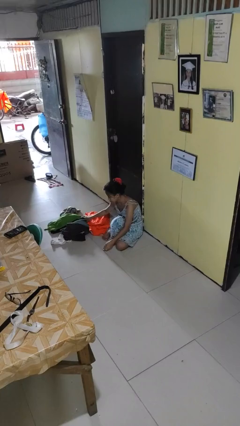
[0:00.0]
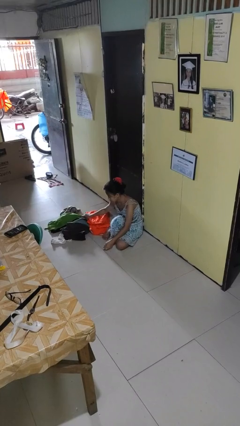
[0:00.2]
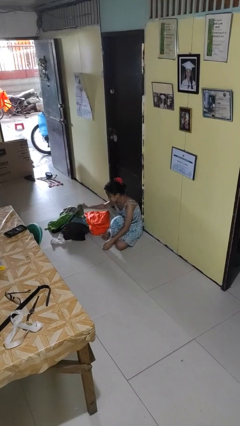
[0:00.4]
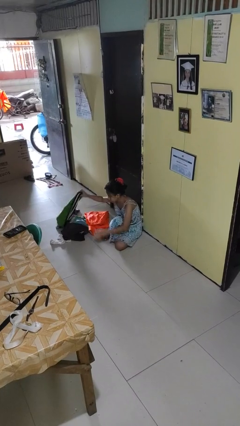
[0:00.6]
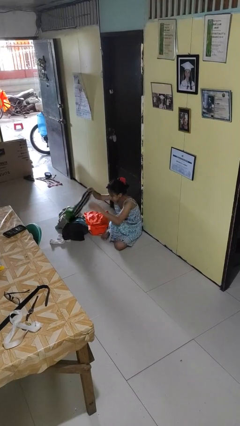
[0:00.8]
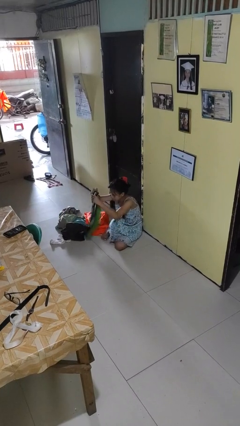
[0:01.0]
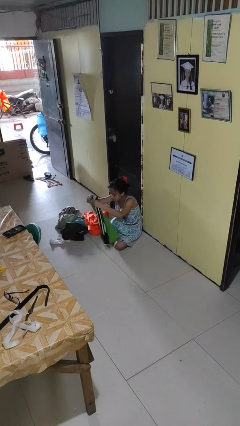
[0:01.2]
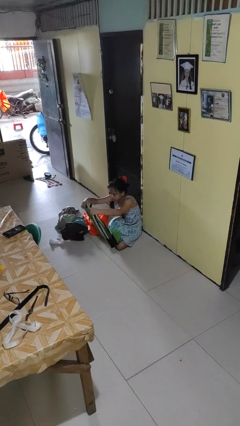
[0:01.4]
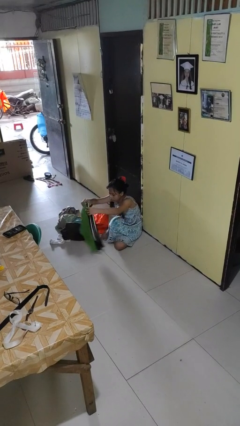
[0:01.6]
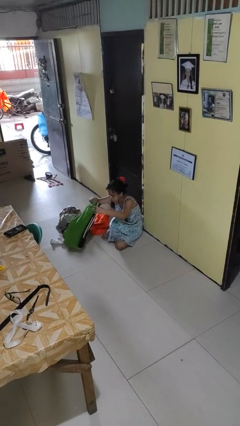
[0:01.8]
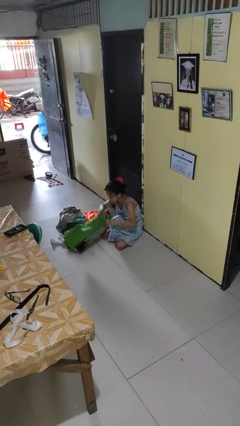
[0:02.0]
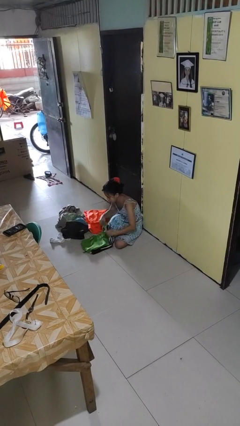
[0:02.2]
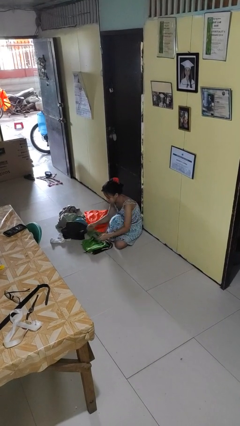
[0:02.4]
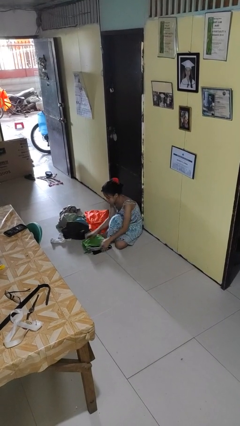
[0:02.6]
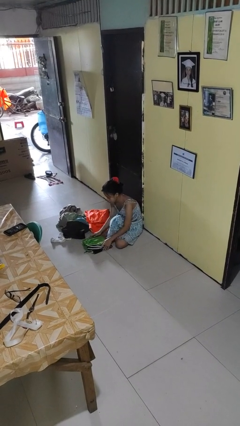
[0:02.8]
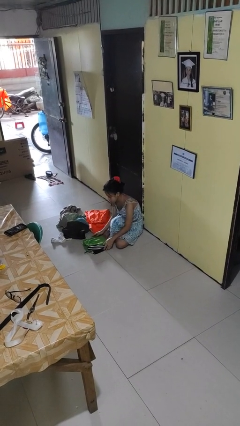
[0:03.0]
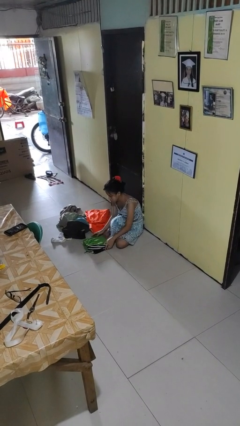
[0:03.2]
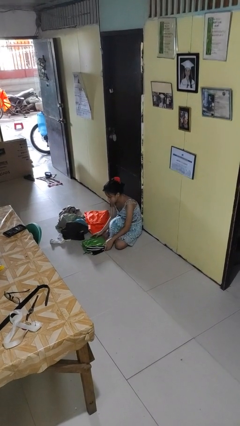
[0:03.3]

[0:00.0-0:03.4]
person folds pants

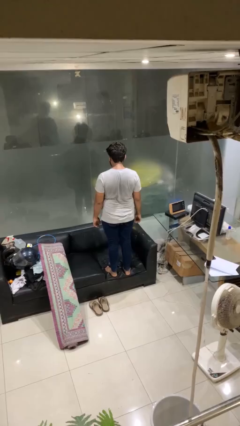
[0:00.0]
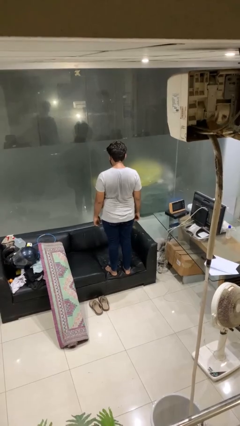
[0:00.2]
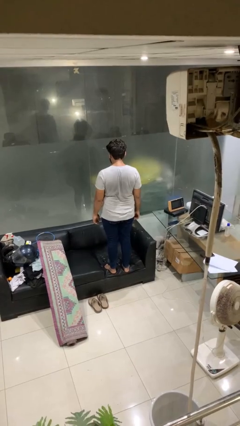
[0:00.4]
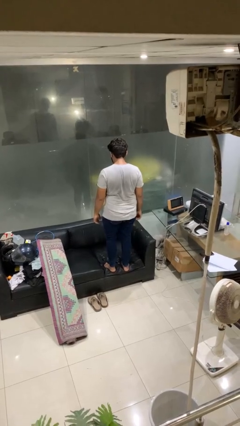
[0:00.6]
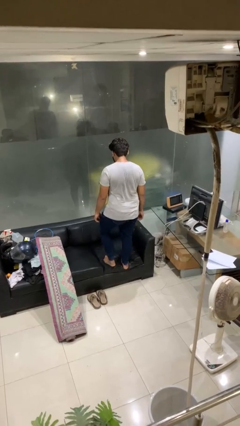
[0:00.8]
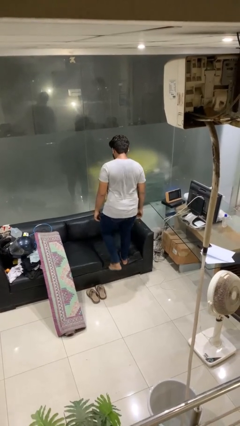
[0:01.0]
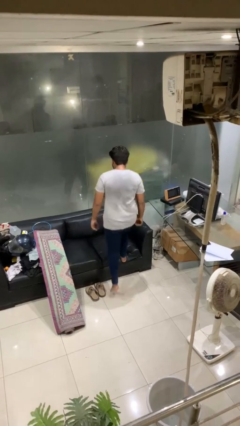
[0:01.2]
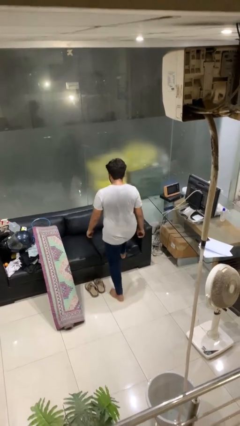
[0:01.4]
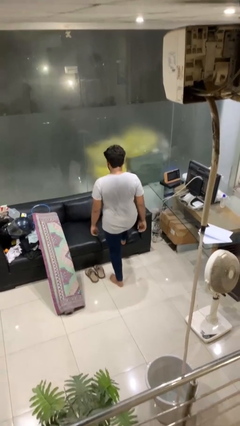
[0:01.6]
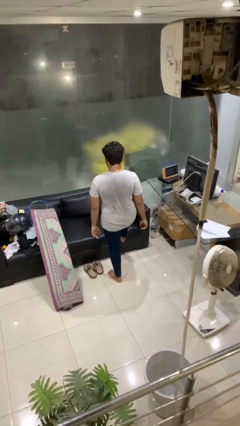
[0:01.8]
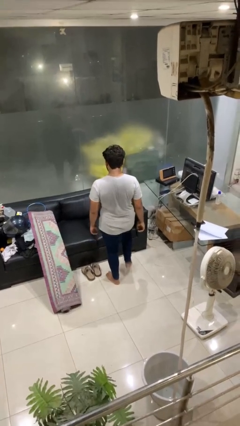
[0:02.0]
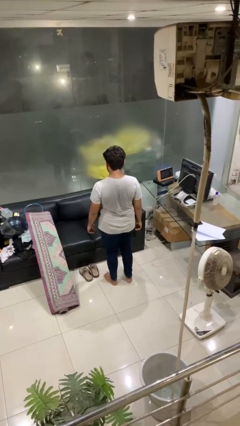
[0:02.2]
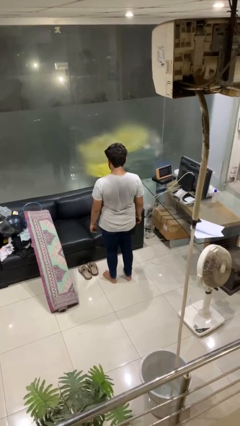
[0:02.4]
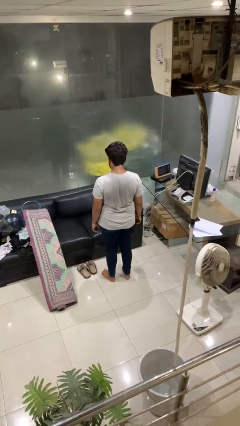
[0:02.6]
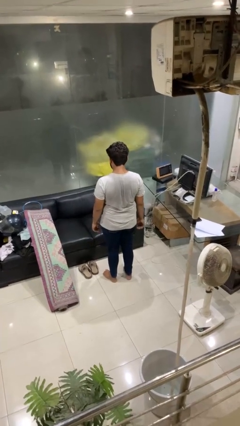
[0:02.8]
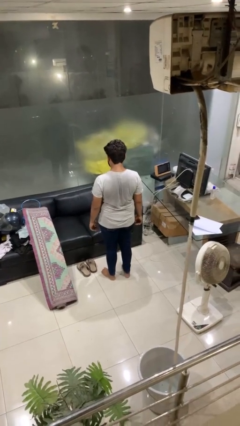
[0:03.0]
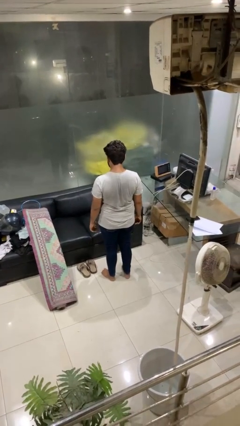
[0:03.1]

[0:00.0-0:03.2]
person climbs off couch

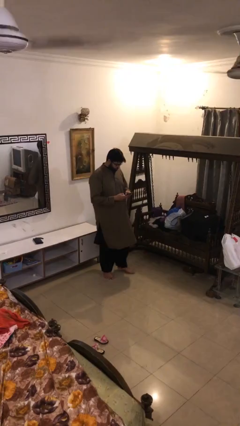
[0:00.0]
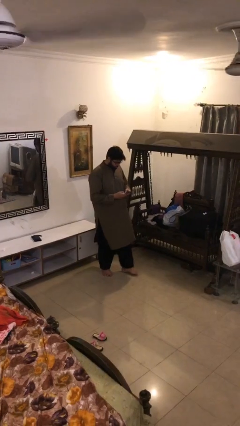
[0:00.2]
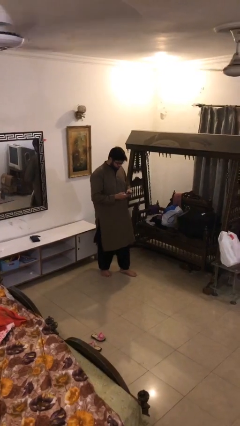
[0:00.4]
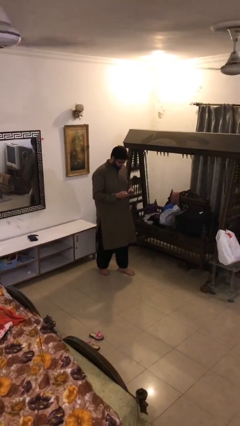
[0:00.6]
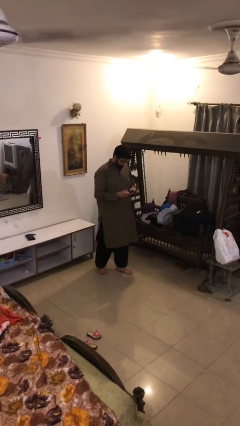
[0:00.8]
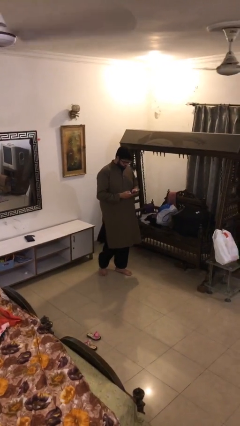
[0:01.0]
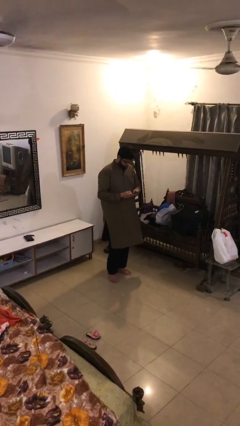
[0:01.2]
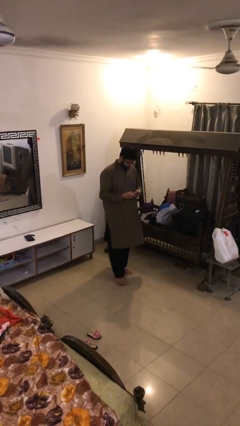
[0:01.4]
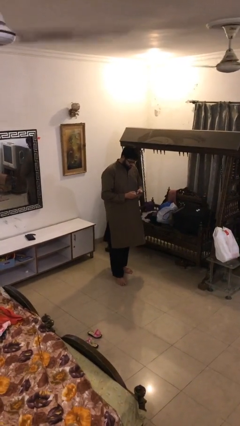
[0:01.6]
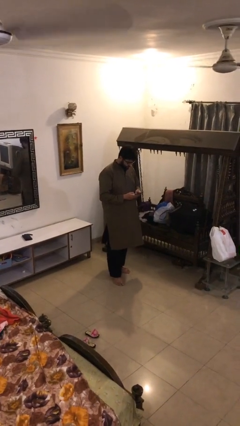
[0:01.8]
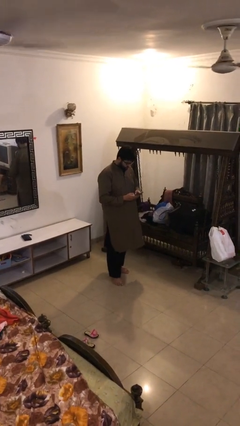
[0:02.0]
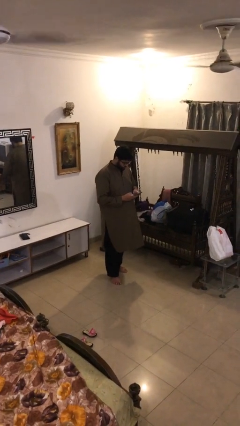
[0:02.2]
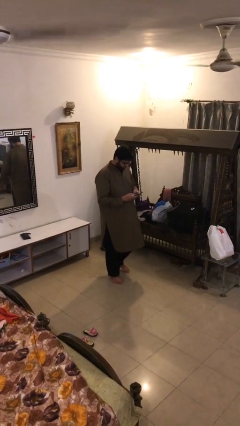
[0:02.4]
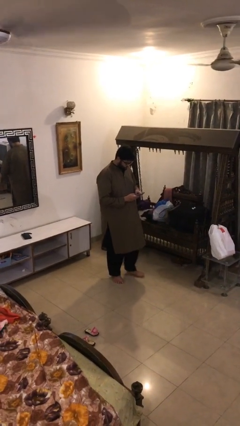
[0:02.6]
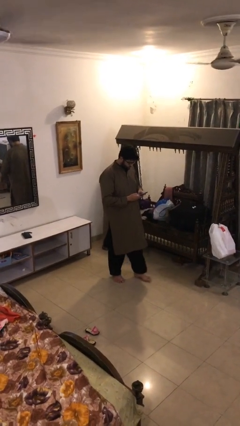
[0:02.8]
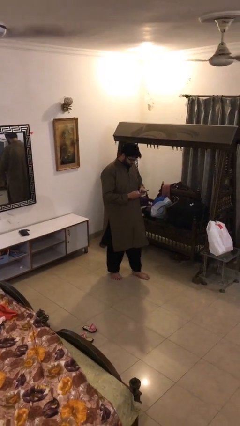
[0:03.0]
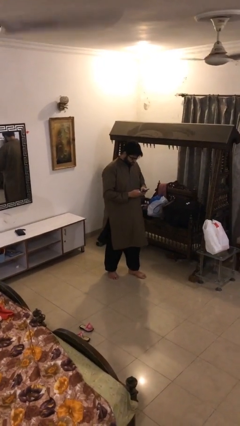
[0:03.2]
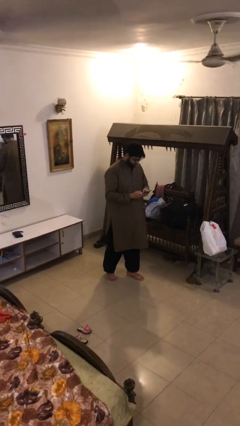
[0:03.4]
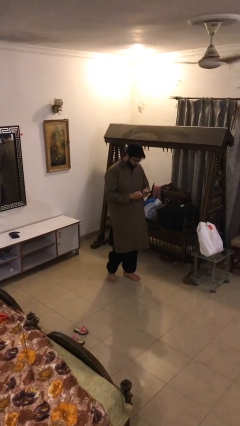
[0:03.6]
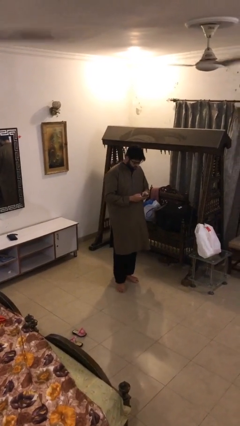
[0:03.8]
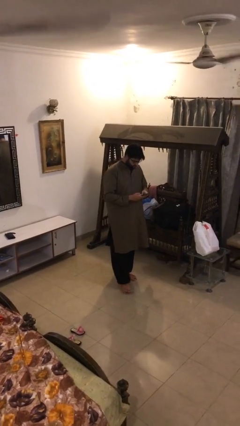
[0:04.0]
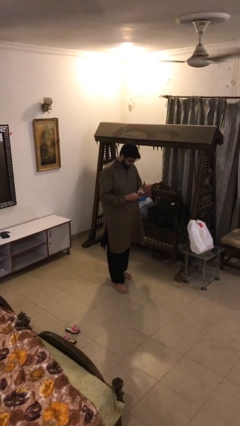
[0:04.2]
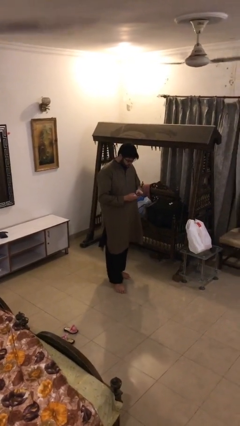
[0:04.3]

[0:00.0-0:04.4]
person texts on phone

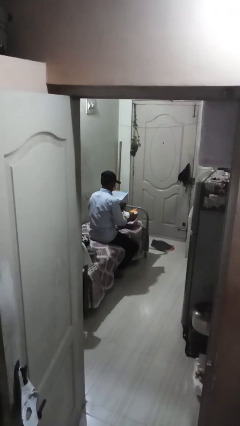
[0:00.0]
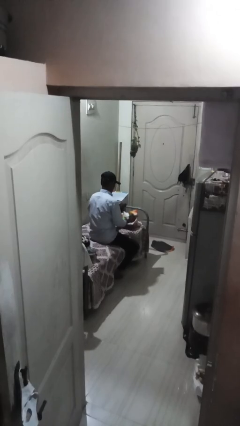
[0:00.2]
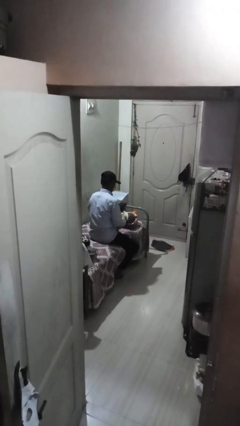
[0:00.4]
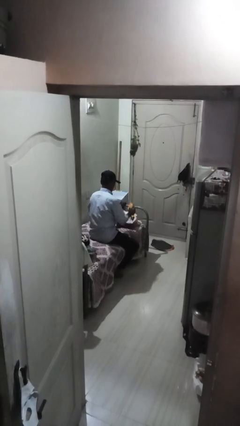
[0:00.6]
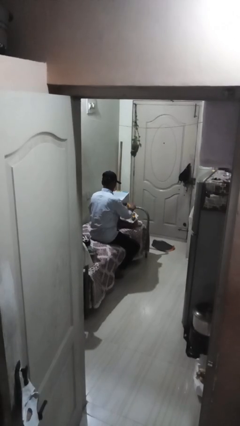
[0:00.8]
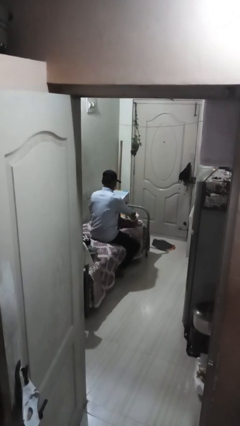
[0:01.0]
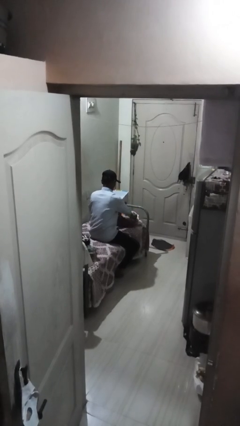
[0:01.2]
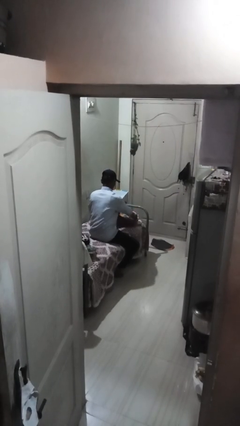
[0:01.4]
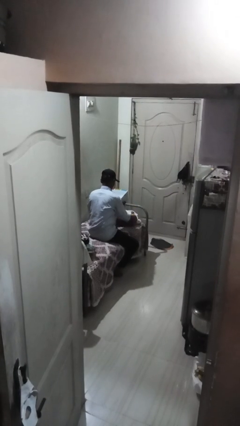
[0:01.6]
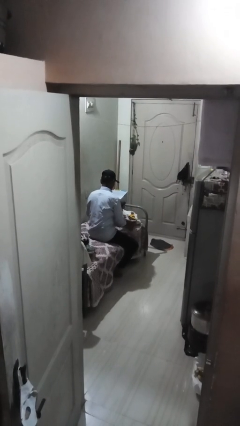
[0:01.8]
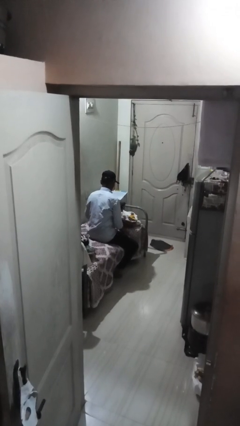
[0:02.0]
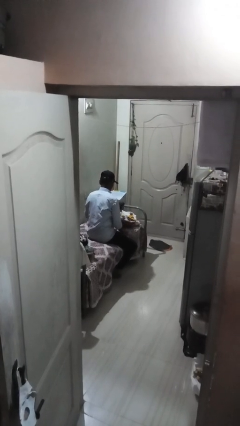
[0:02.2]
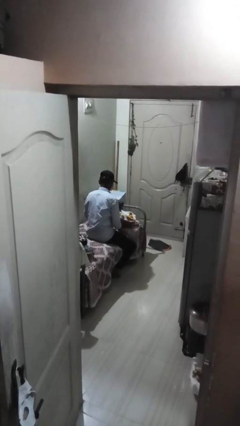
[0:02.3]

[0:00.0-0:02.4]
person puts object into bag

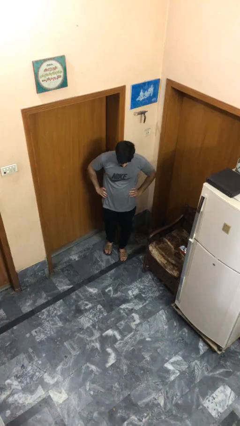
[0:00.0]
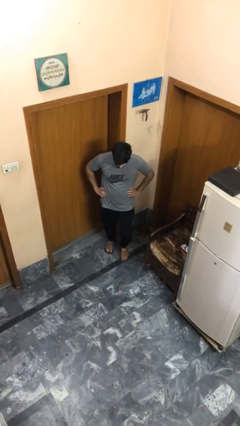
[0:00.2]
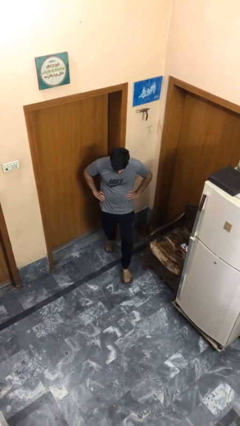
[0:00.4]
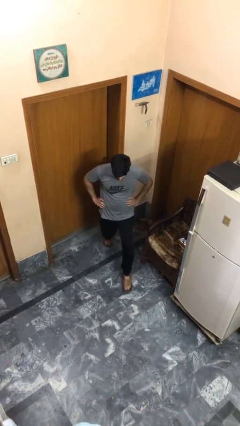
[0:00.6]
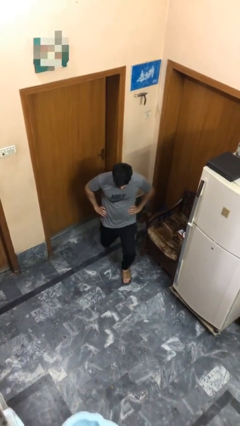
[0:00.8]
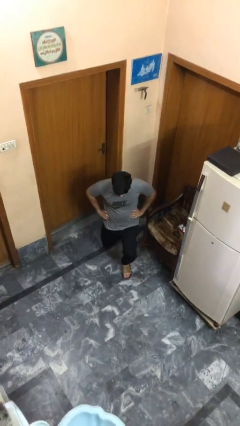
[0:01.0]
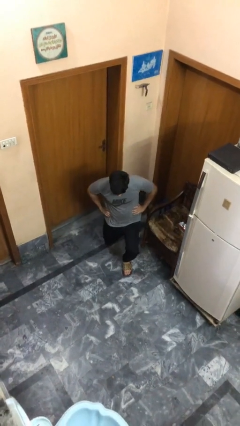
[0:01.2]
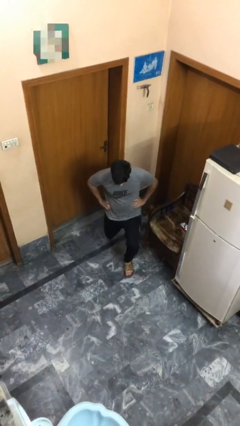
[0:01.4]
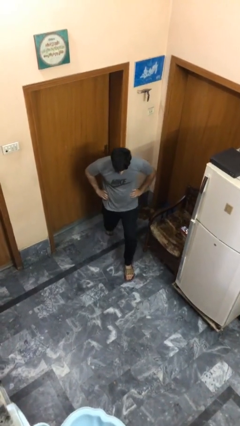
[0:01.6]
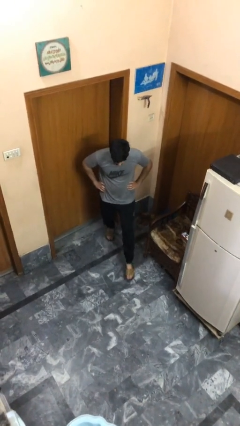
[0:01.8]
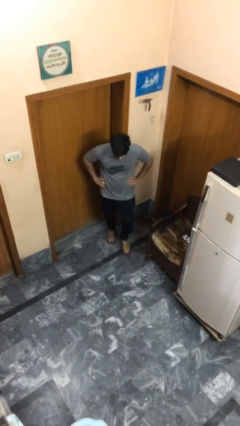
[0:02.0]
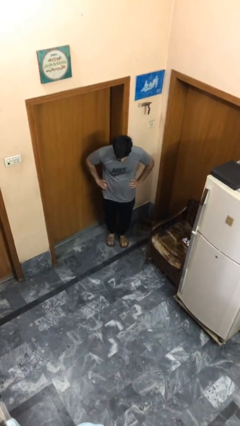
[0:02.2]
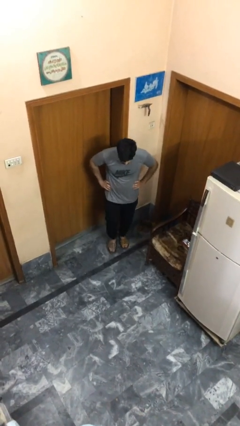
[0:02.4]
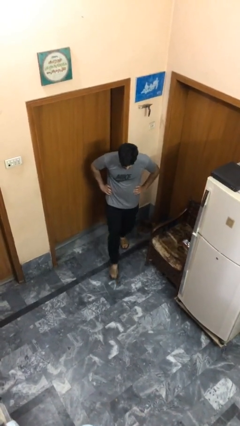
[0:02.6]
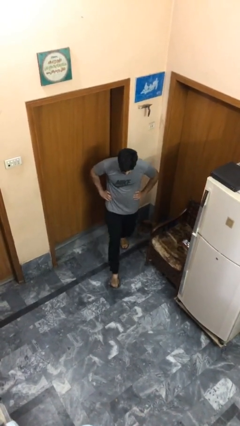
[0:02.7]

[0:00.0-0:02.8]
person exercises with lunges

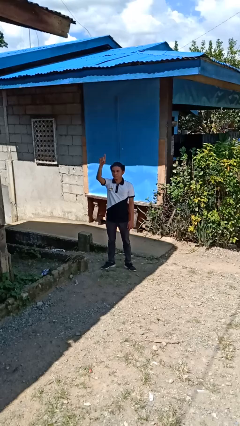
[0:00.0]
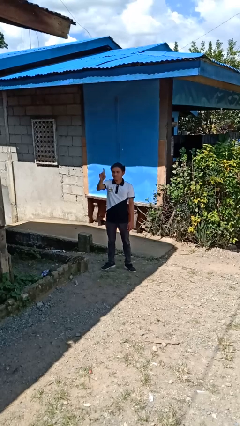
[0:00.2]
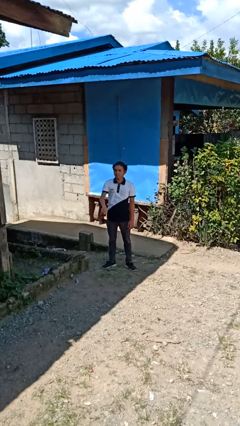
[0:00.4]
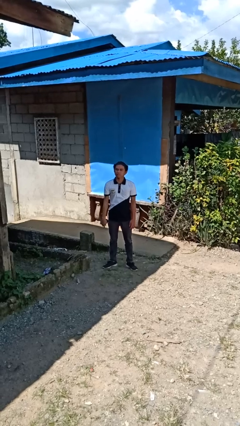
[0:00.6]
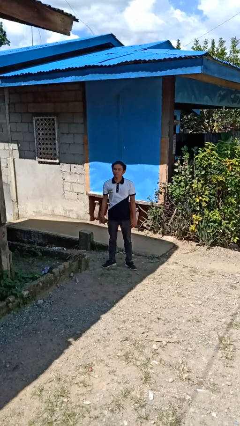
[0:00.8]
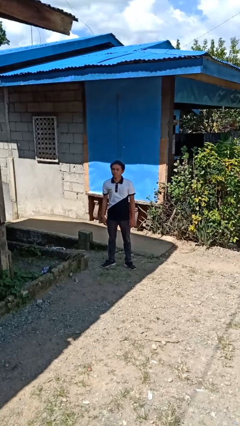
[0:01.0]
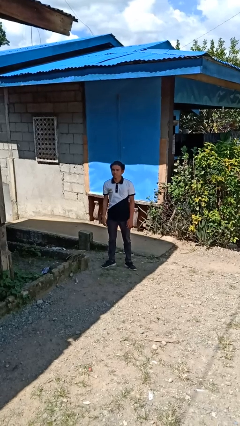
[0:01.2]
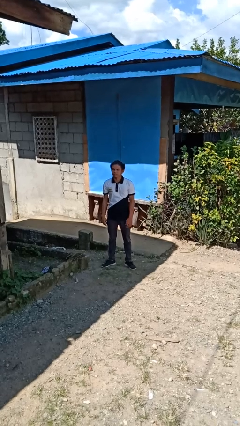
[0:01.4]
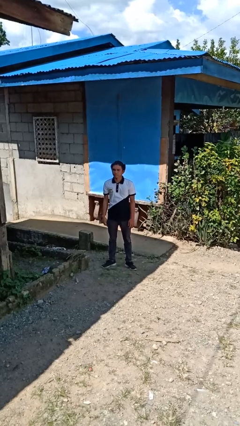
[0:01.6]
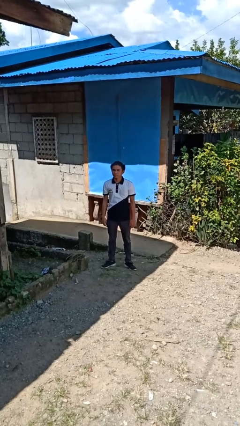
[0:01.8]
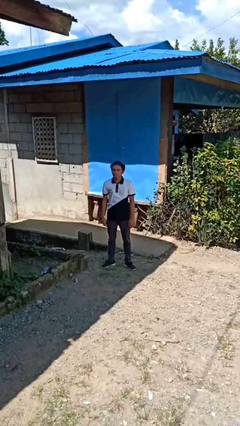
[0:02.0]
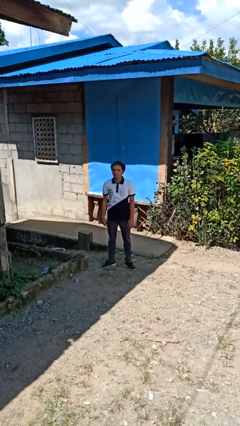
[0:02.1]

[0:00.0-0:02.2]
person gestures swipe down
